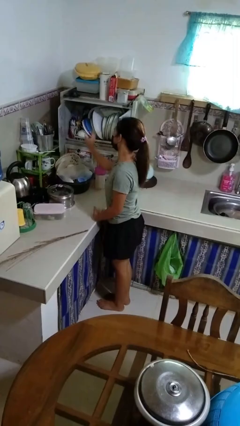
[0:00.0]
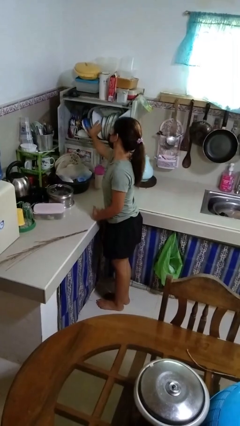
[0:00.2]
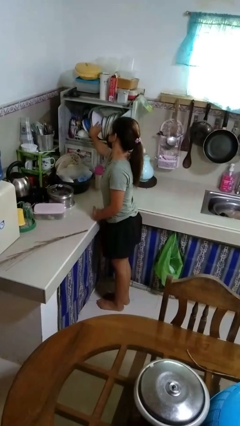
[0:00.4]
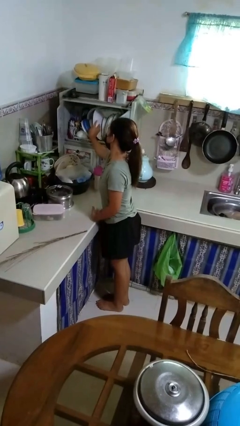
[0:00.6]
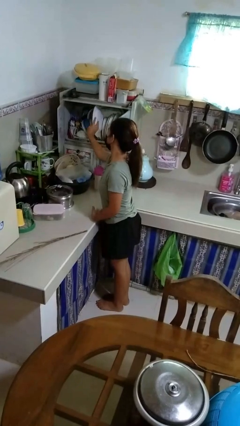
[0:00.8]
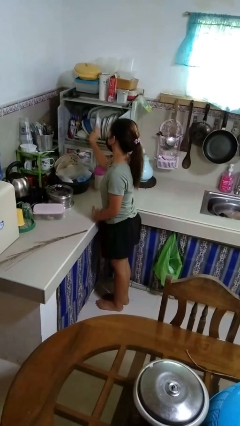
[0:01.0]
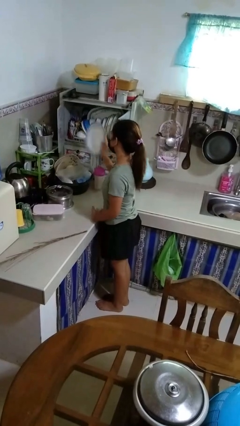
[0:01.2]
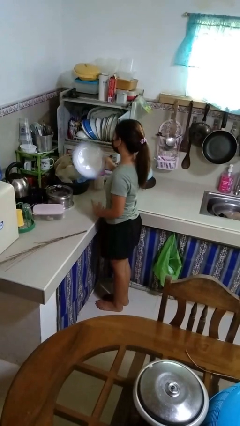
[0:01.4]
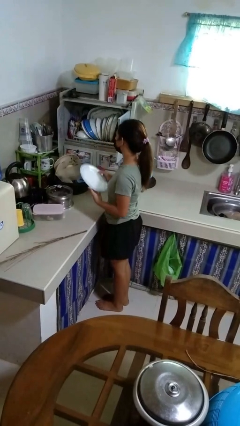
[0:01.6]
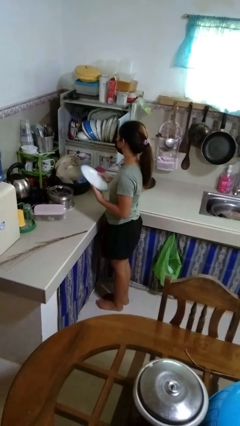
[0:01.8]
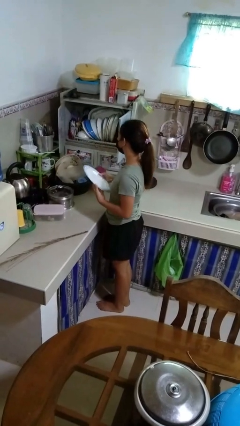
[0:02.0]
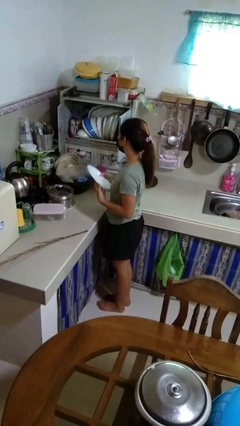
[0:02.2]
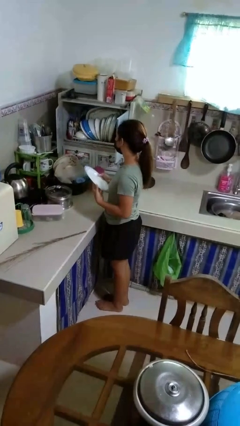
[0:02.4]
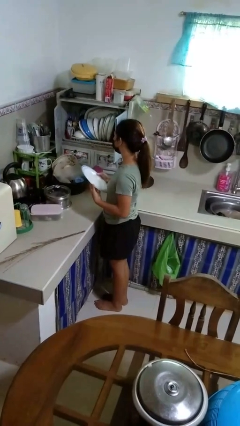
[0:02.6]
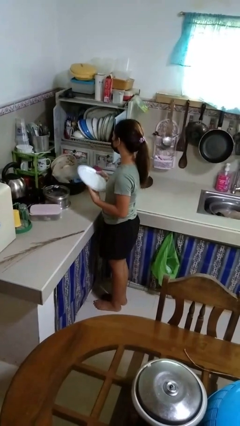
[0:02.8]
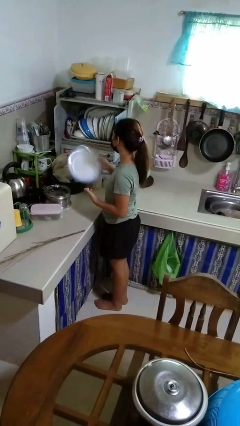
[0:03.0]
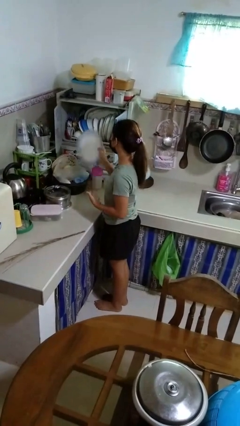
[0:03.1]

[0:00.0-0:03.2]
person takes object from kitchen drawer

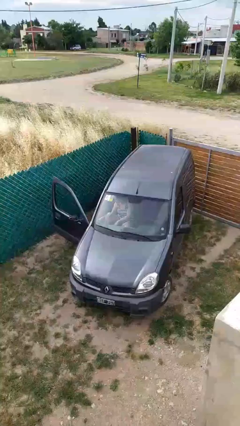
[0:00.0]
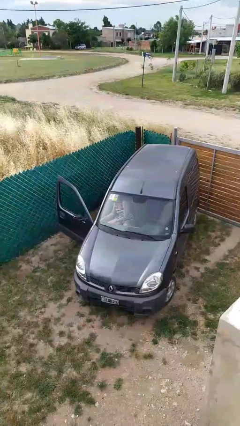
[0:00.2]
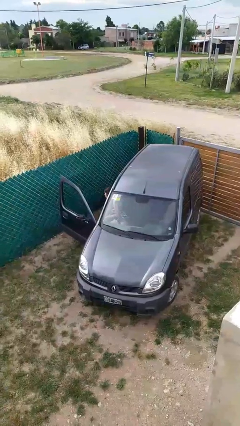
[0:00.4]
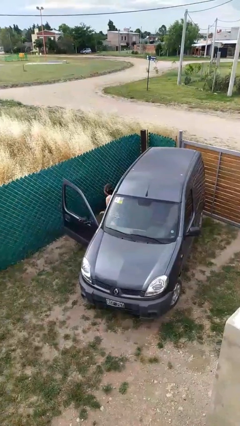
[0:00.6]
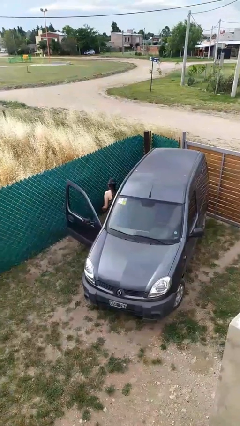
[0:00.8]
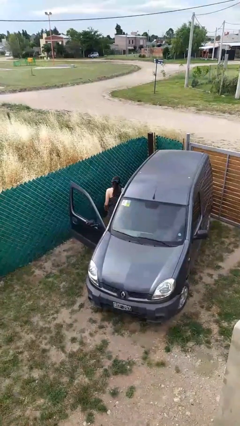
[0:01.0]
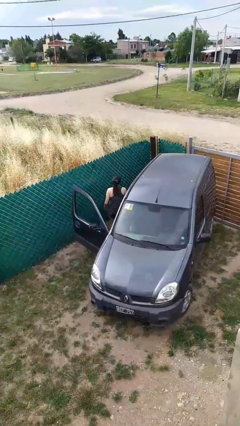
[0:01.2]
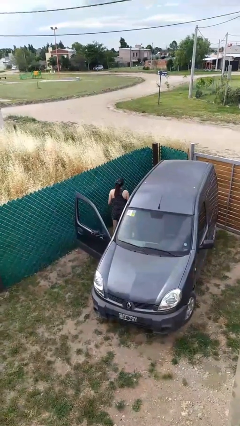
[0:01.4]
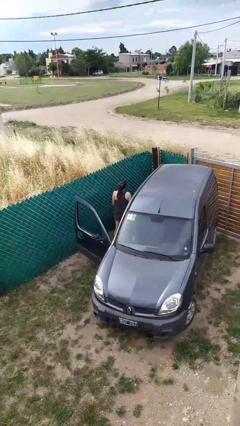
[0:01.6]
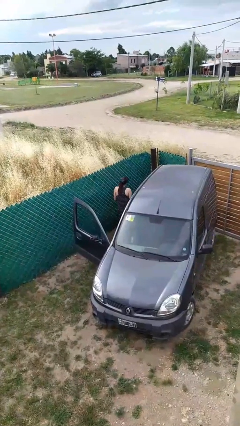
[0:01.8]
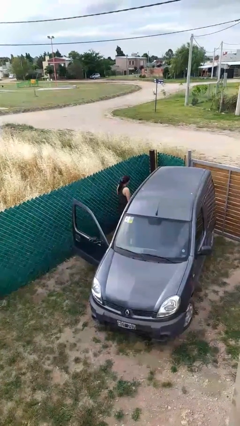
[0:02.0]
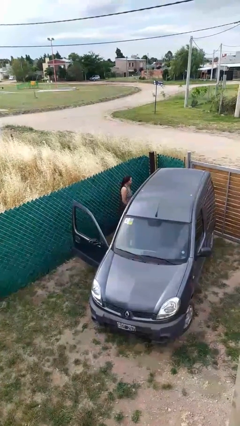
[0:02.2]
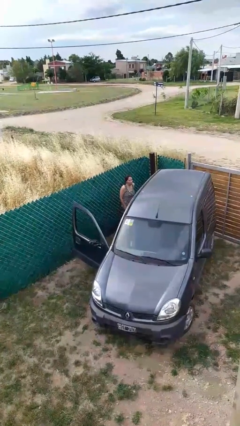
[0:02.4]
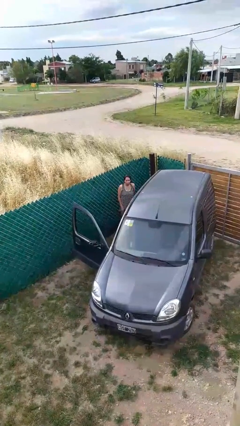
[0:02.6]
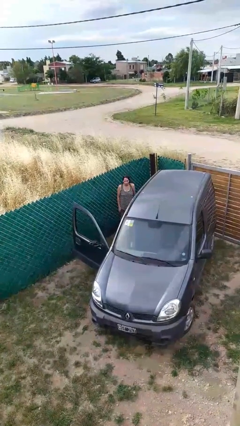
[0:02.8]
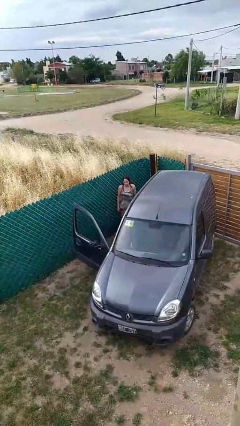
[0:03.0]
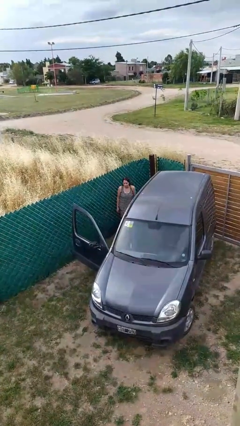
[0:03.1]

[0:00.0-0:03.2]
person exits car

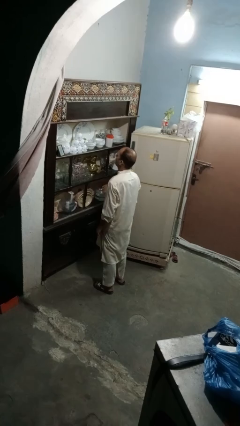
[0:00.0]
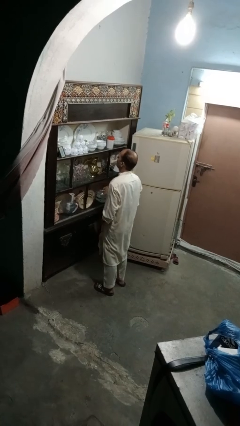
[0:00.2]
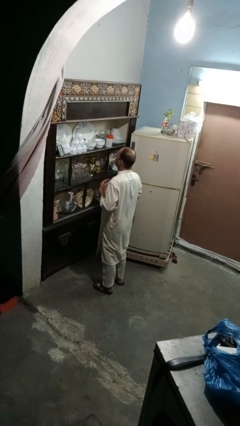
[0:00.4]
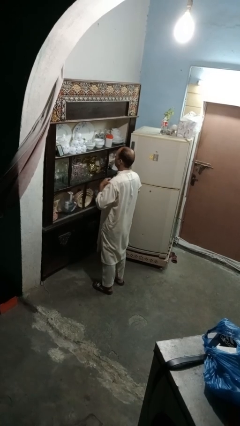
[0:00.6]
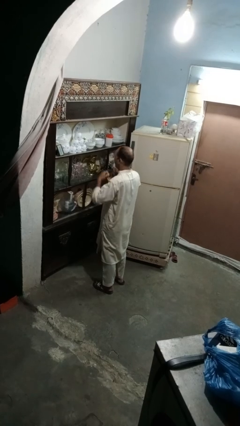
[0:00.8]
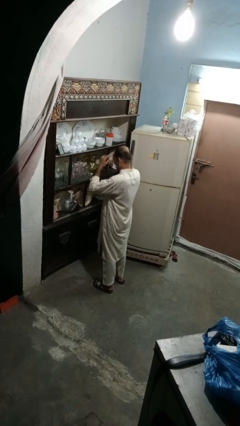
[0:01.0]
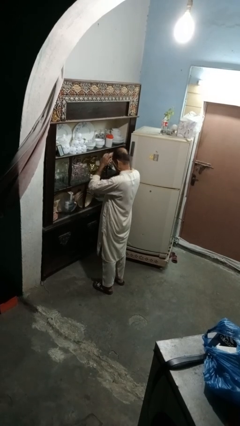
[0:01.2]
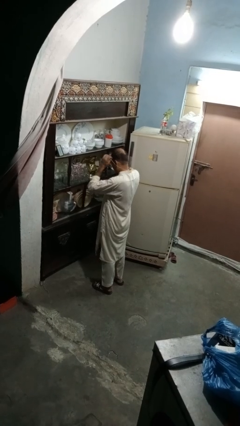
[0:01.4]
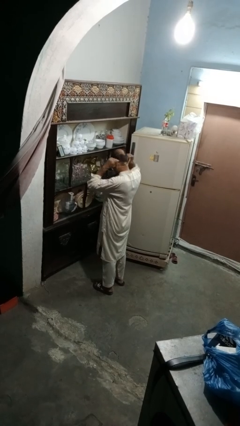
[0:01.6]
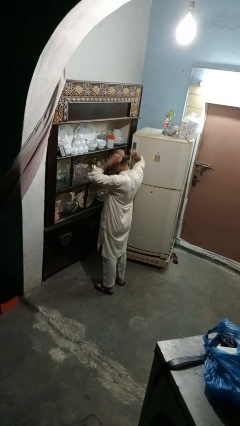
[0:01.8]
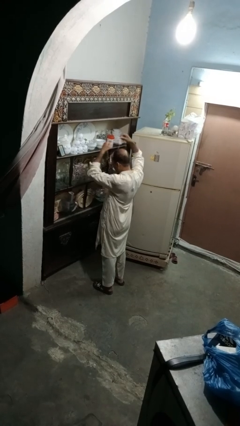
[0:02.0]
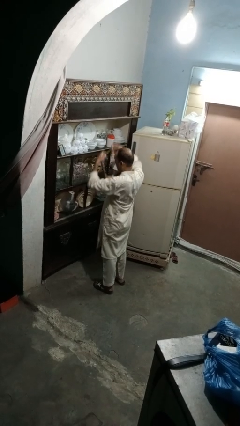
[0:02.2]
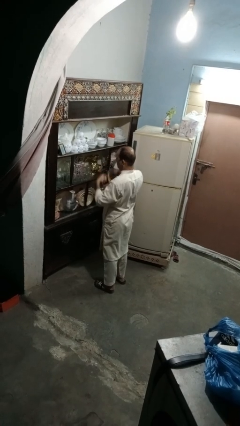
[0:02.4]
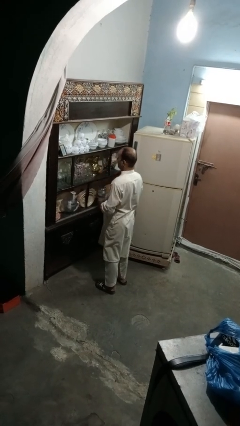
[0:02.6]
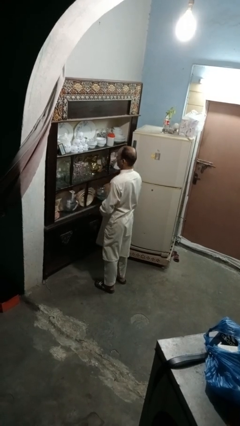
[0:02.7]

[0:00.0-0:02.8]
person takes off necklace

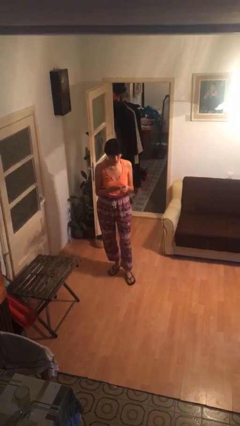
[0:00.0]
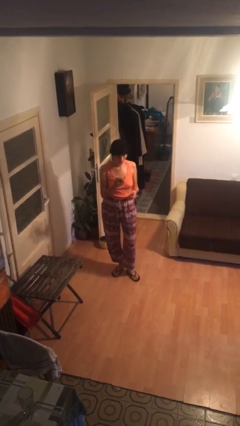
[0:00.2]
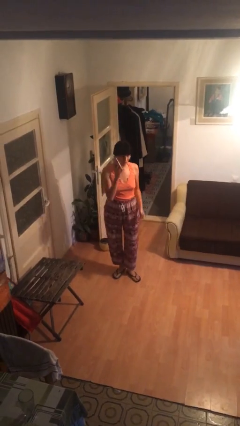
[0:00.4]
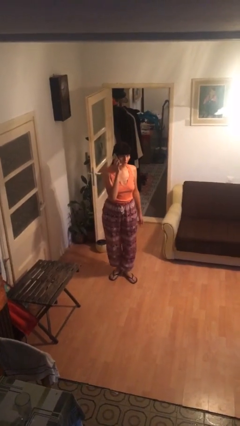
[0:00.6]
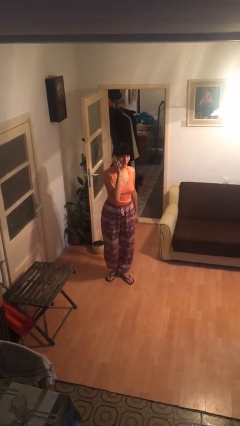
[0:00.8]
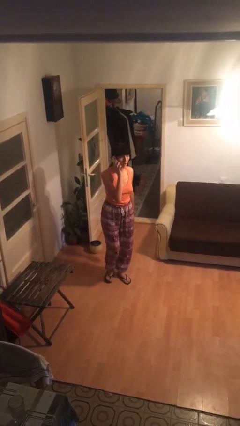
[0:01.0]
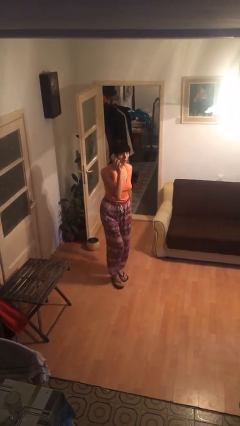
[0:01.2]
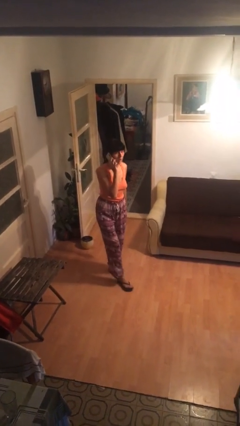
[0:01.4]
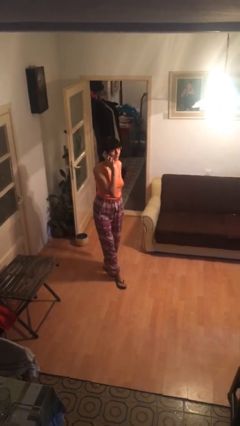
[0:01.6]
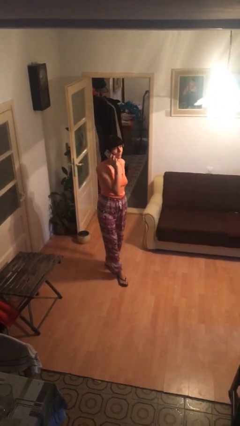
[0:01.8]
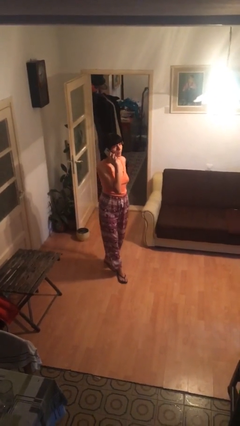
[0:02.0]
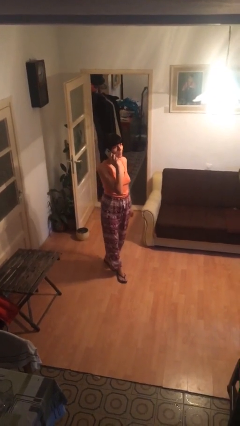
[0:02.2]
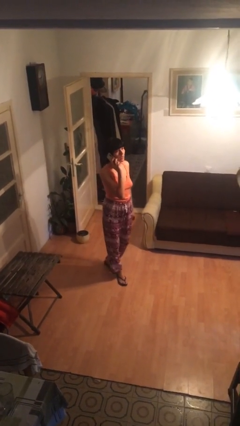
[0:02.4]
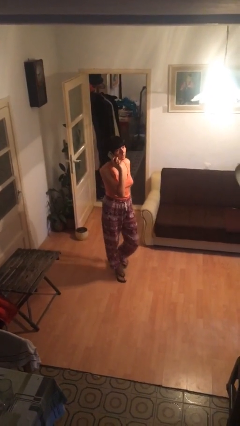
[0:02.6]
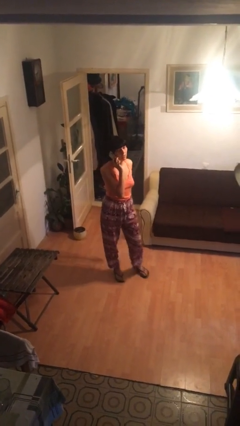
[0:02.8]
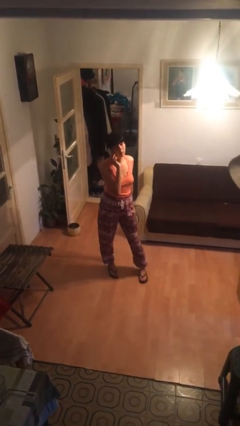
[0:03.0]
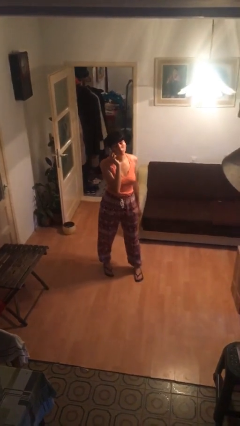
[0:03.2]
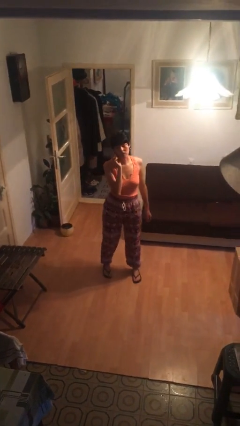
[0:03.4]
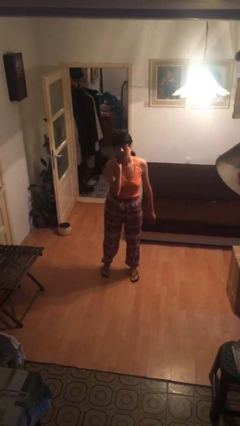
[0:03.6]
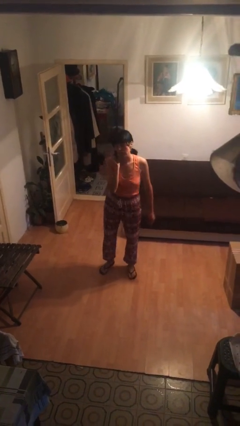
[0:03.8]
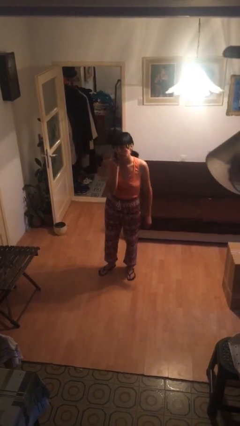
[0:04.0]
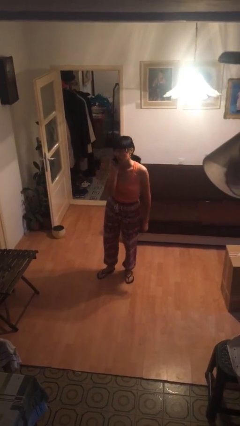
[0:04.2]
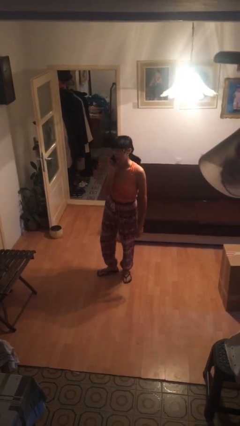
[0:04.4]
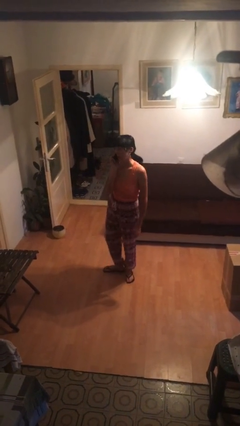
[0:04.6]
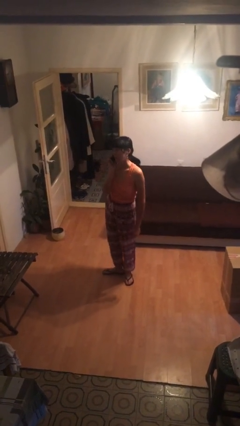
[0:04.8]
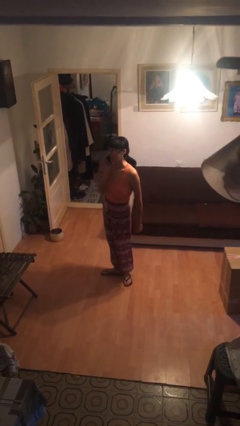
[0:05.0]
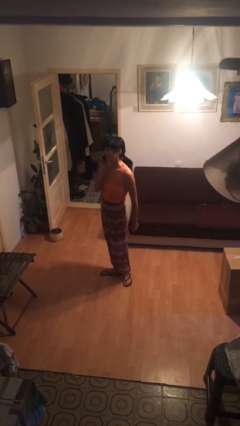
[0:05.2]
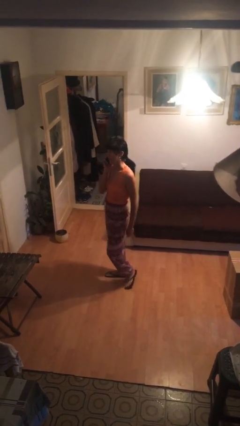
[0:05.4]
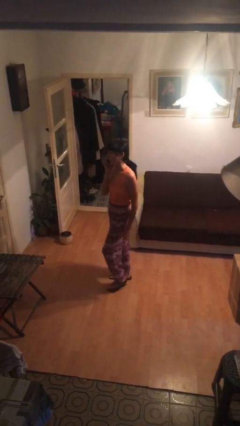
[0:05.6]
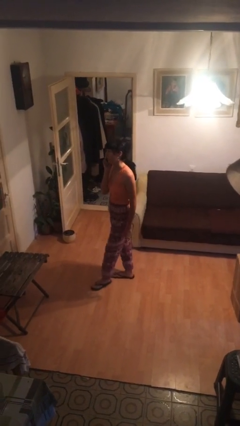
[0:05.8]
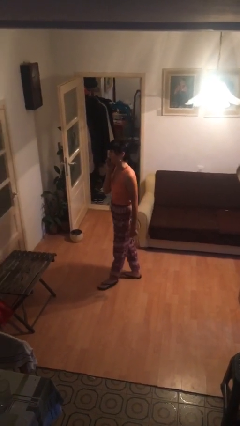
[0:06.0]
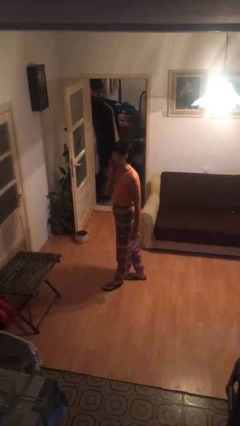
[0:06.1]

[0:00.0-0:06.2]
person talks on phone

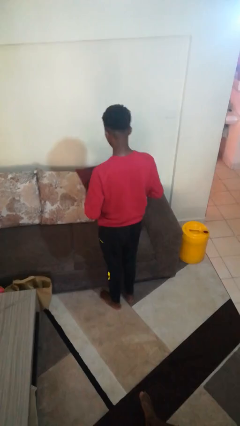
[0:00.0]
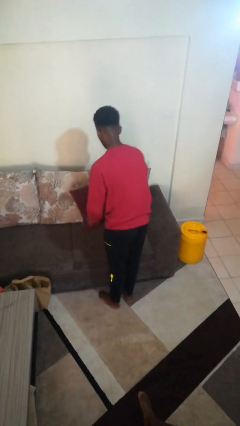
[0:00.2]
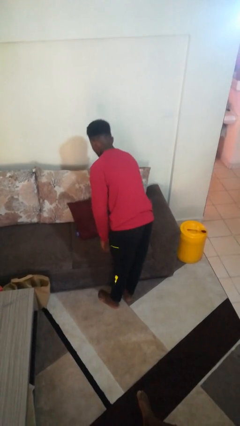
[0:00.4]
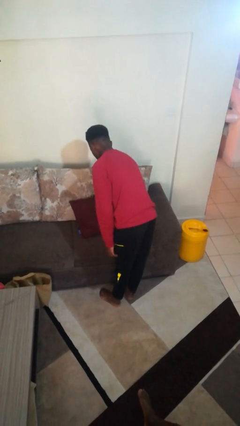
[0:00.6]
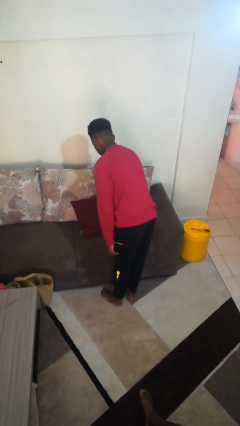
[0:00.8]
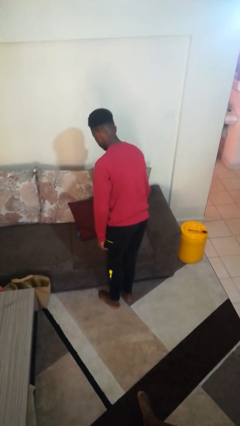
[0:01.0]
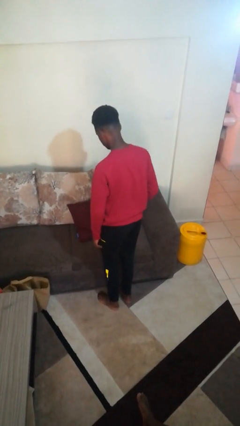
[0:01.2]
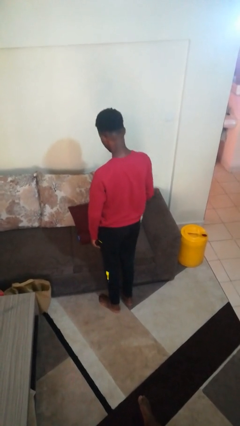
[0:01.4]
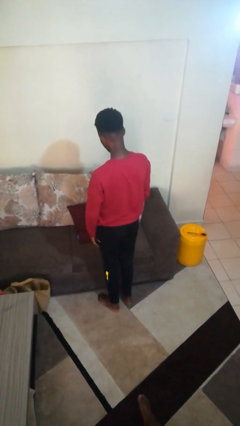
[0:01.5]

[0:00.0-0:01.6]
person puts down object on couch

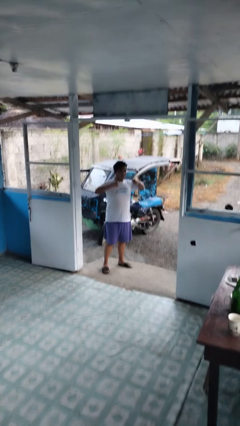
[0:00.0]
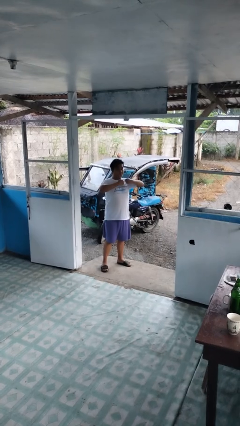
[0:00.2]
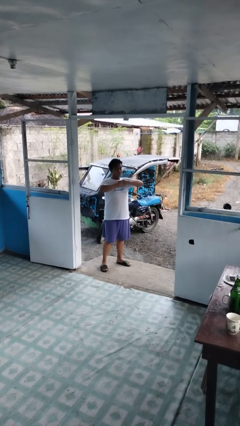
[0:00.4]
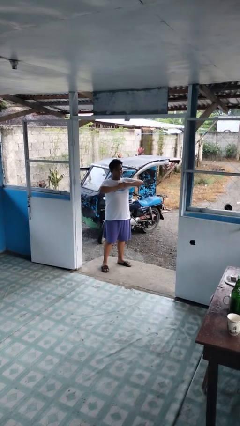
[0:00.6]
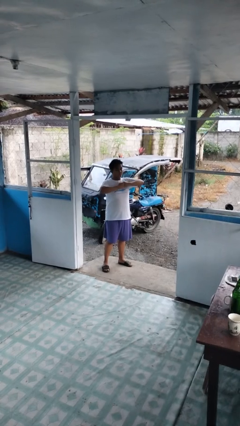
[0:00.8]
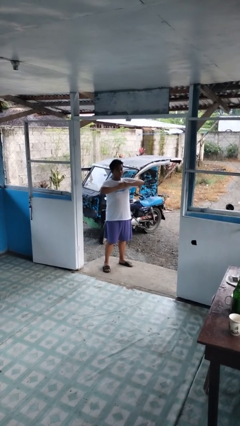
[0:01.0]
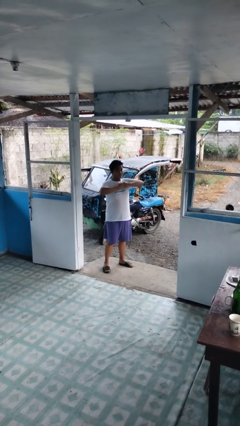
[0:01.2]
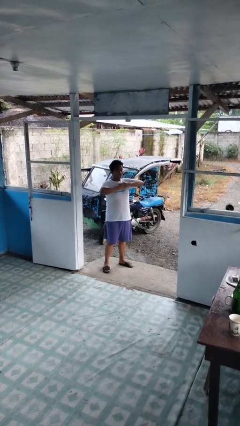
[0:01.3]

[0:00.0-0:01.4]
person gestures zoom out
